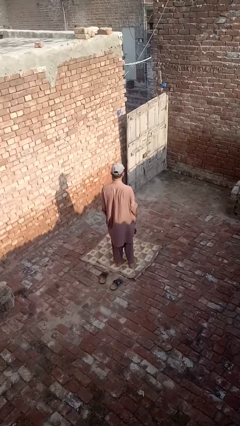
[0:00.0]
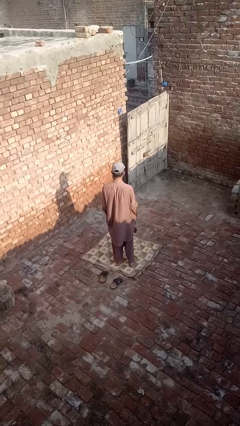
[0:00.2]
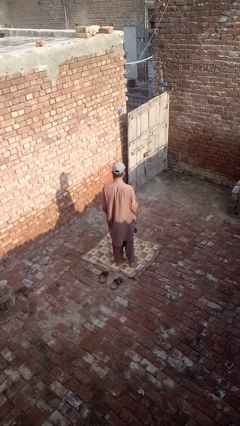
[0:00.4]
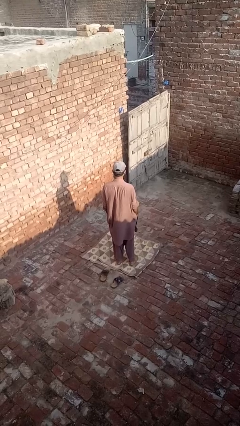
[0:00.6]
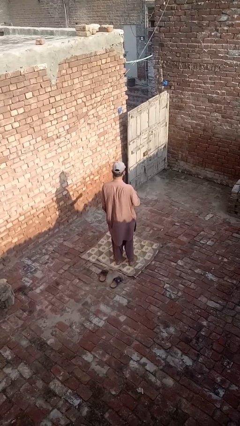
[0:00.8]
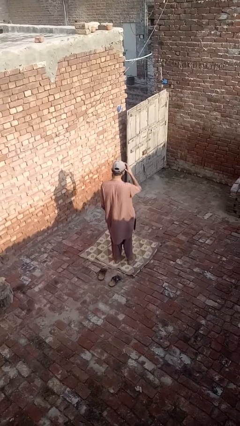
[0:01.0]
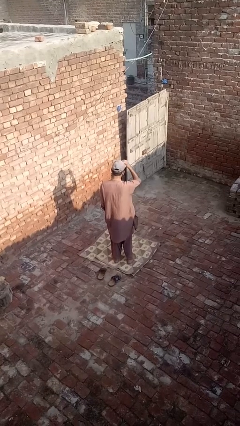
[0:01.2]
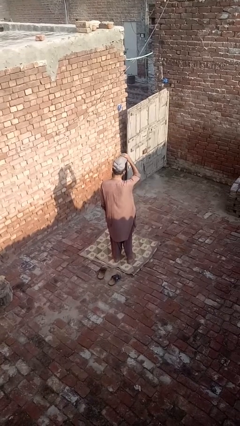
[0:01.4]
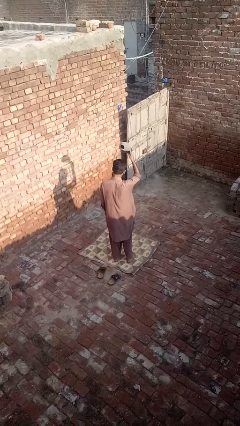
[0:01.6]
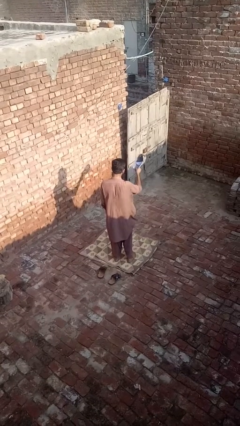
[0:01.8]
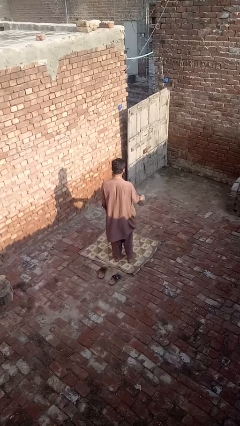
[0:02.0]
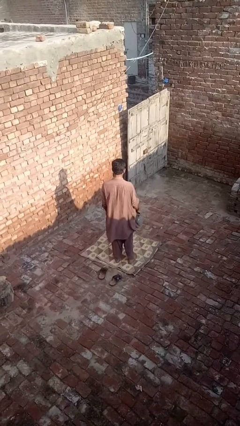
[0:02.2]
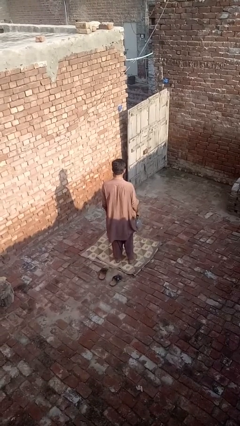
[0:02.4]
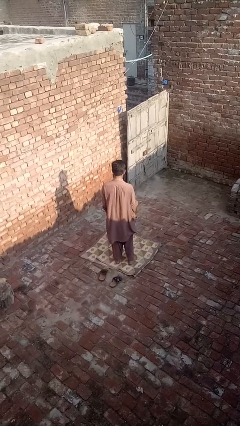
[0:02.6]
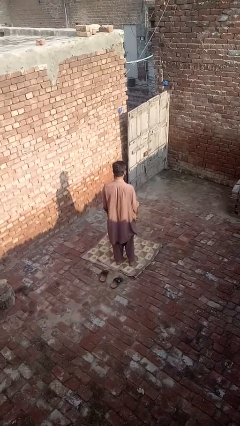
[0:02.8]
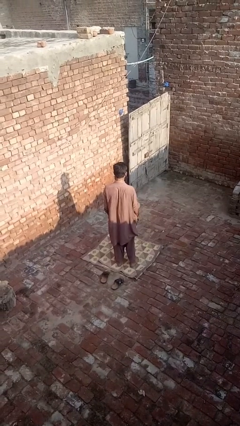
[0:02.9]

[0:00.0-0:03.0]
person takes off hat

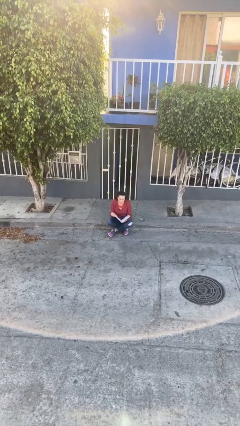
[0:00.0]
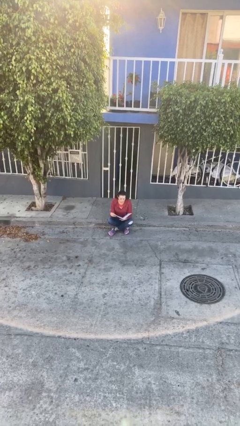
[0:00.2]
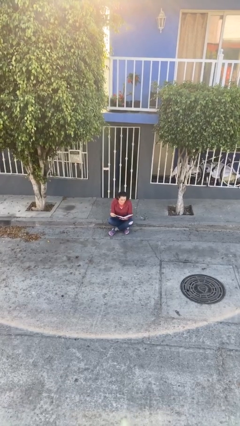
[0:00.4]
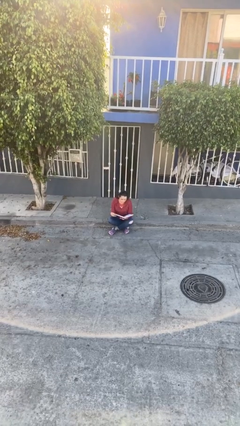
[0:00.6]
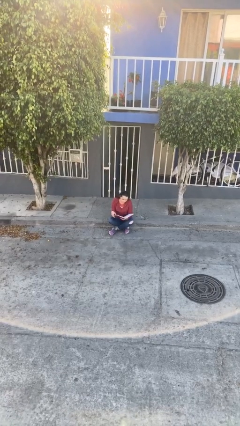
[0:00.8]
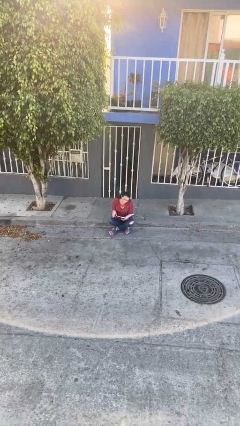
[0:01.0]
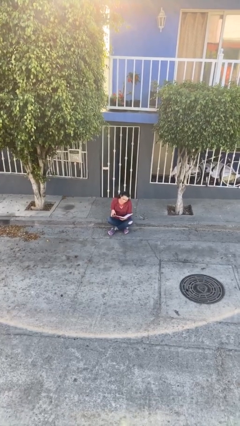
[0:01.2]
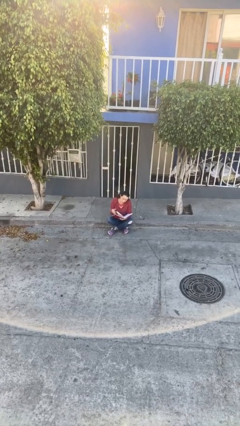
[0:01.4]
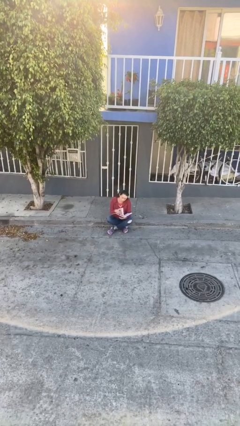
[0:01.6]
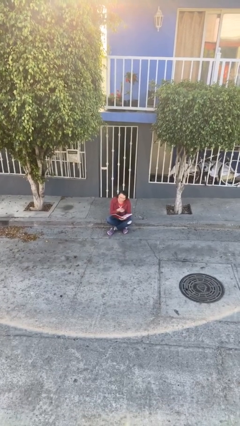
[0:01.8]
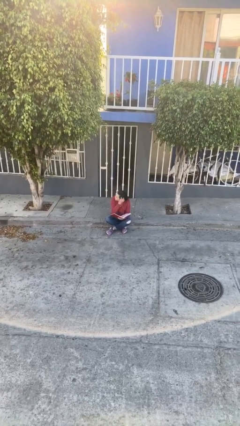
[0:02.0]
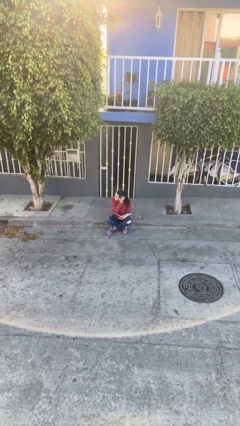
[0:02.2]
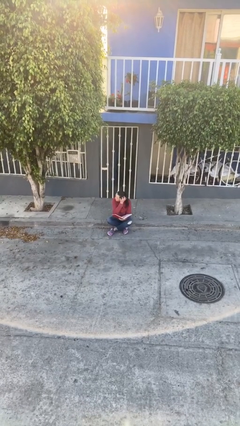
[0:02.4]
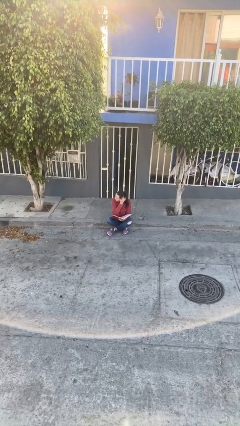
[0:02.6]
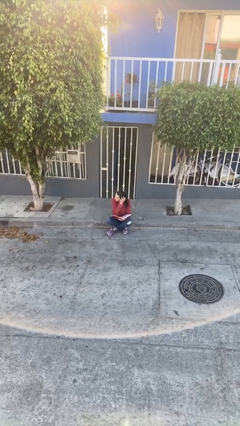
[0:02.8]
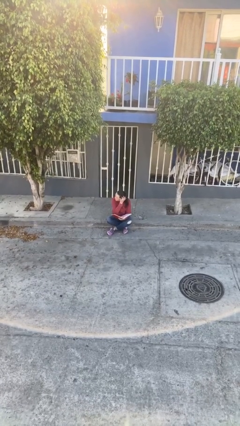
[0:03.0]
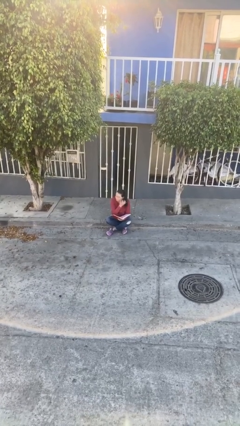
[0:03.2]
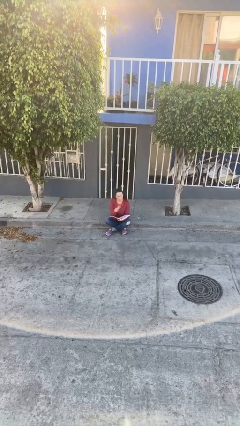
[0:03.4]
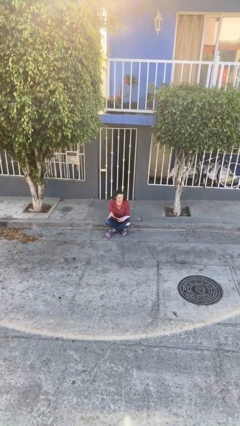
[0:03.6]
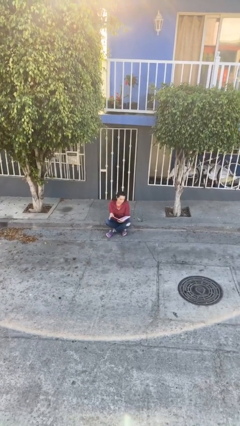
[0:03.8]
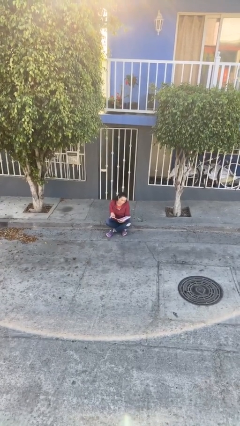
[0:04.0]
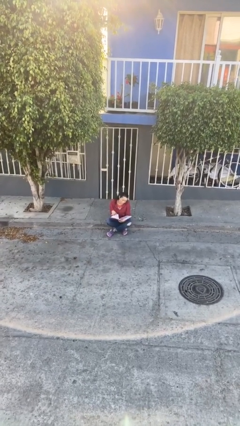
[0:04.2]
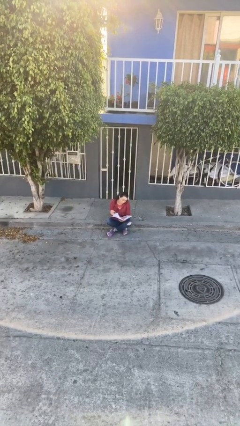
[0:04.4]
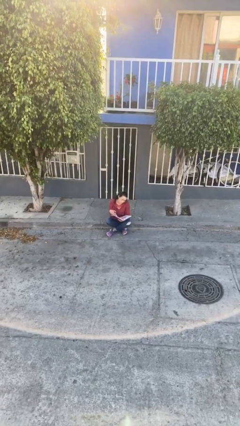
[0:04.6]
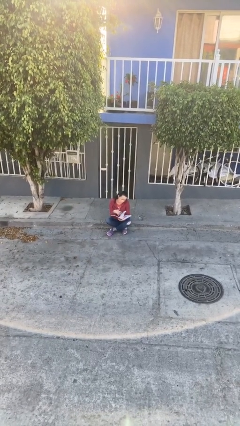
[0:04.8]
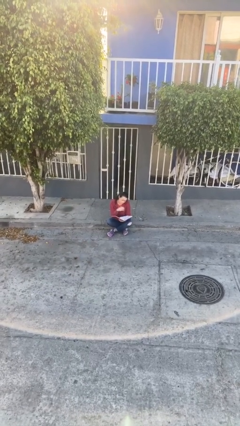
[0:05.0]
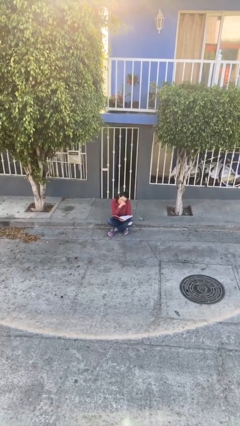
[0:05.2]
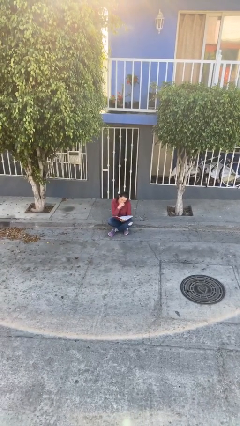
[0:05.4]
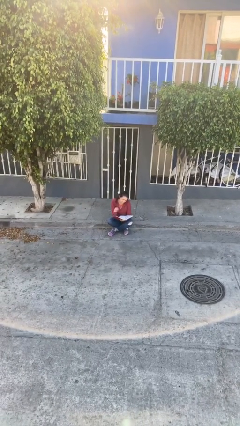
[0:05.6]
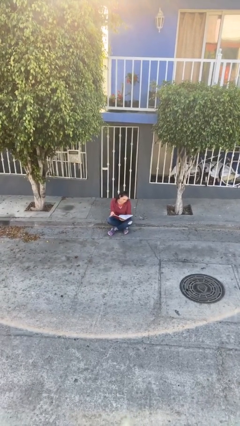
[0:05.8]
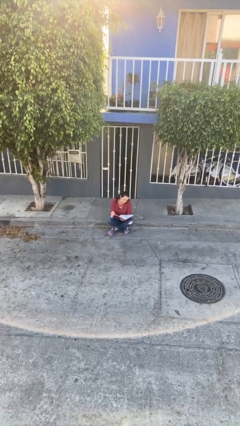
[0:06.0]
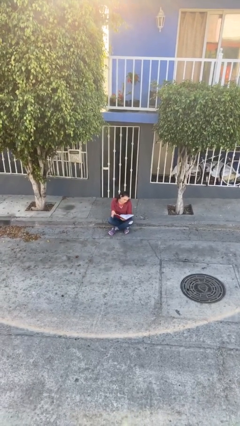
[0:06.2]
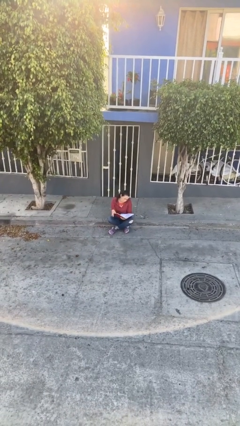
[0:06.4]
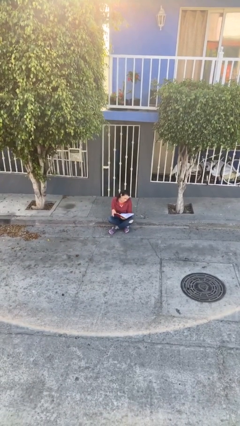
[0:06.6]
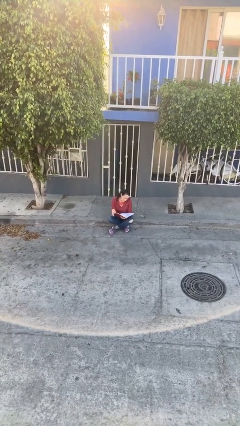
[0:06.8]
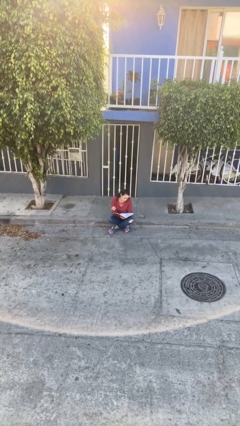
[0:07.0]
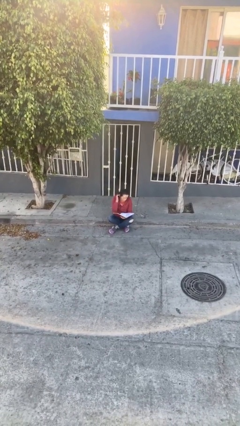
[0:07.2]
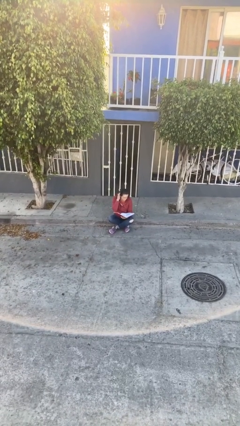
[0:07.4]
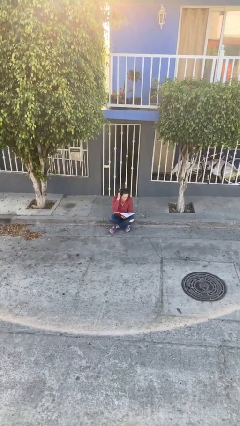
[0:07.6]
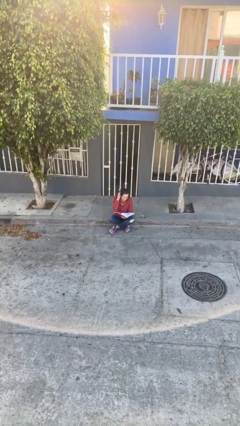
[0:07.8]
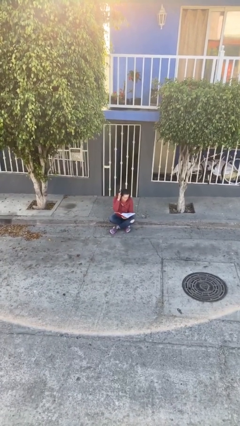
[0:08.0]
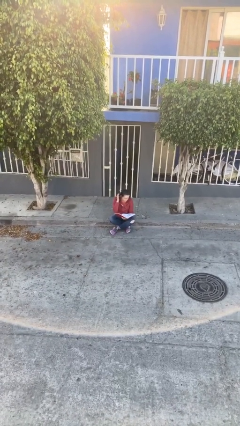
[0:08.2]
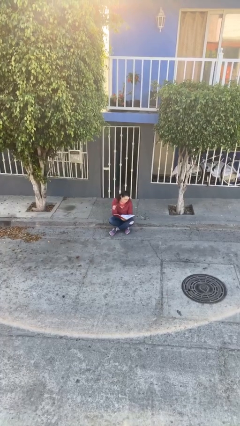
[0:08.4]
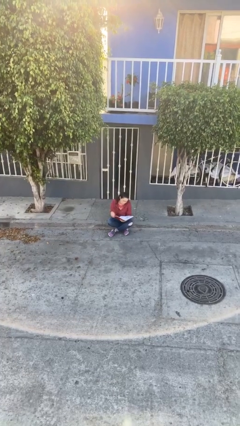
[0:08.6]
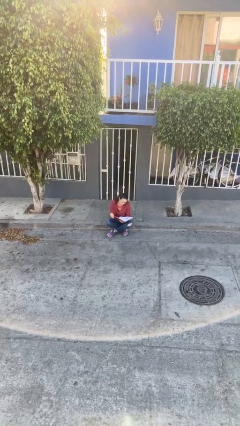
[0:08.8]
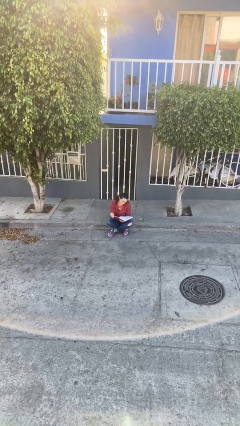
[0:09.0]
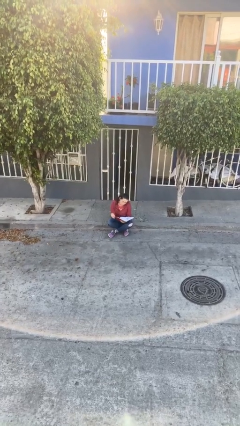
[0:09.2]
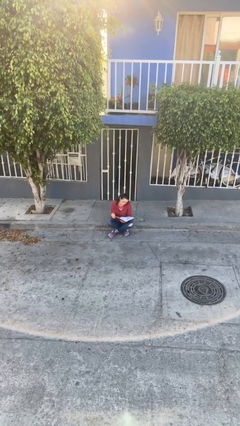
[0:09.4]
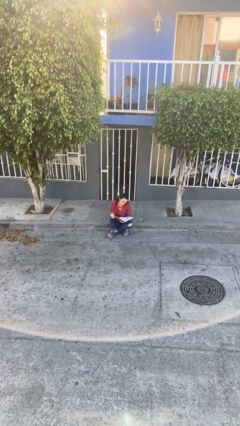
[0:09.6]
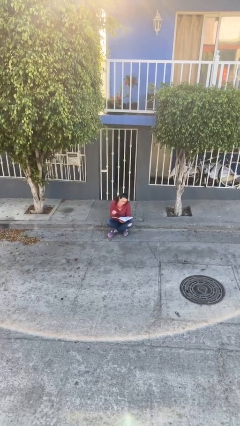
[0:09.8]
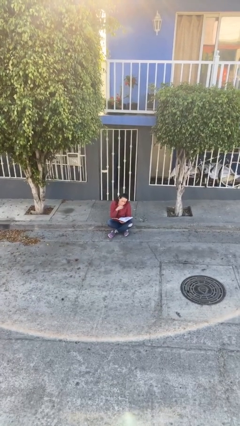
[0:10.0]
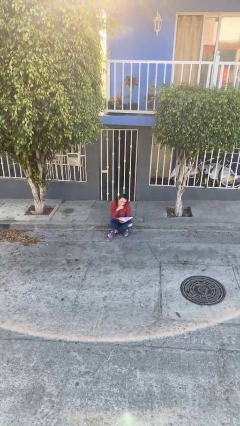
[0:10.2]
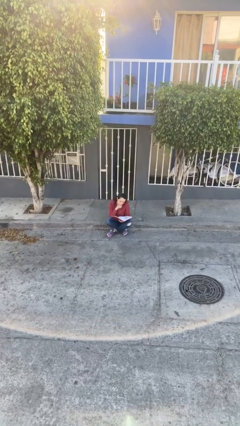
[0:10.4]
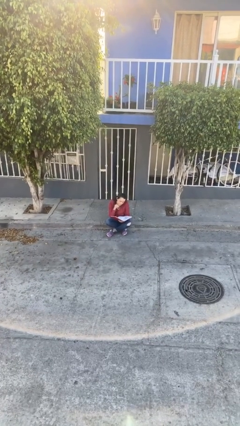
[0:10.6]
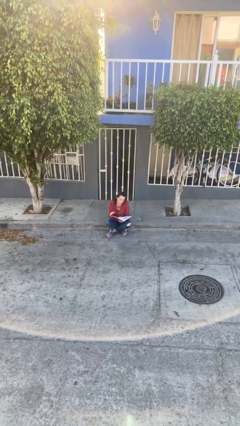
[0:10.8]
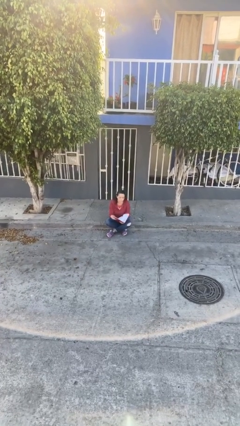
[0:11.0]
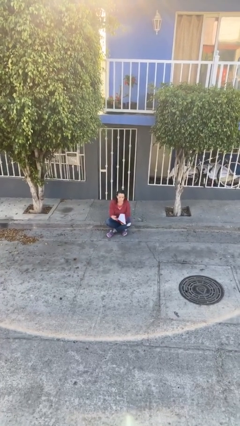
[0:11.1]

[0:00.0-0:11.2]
person reads document

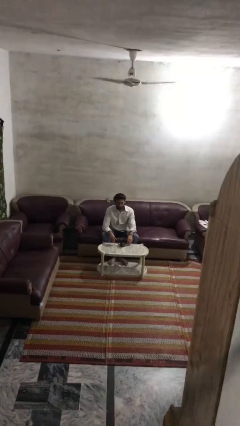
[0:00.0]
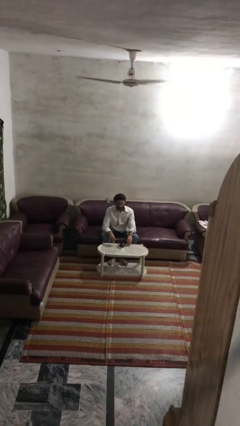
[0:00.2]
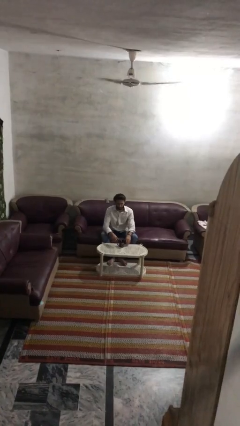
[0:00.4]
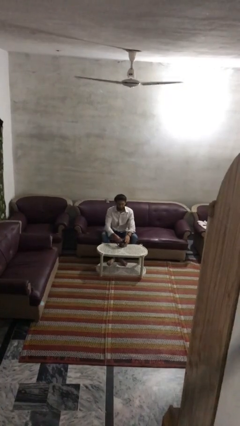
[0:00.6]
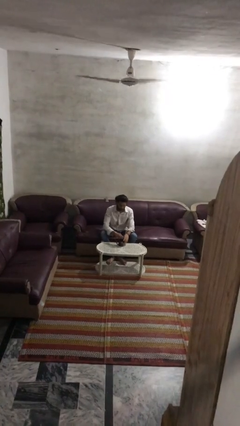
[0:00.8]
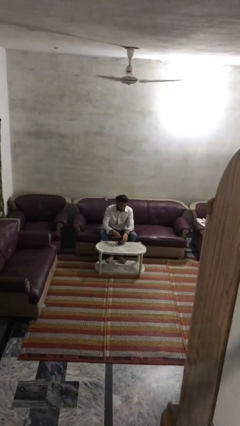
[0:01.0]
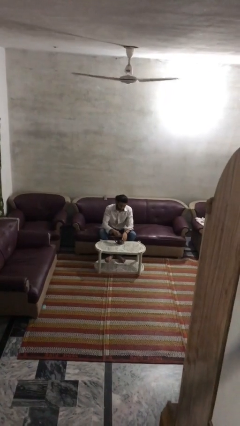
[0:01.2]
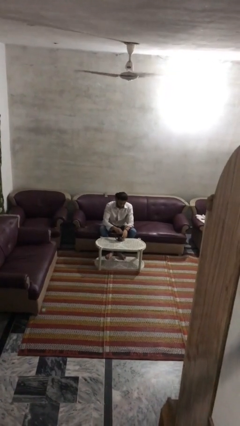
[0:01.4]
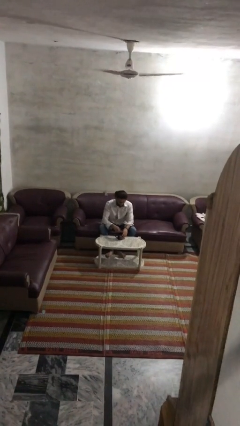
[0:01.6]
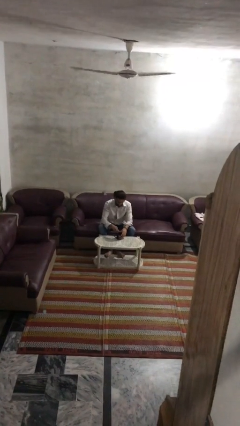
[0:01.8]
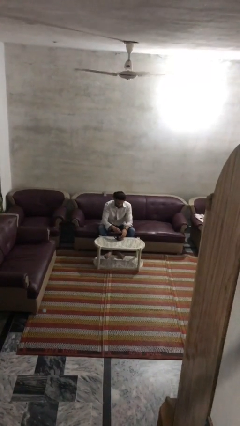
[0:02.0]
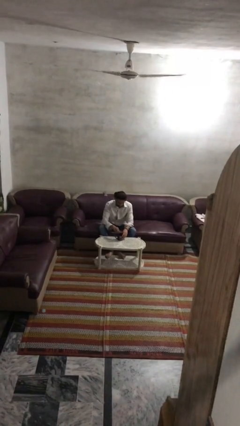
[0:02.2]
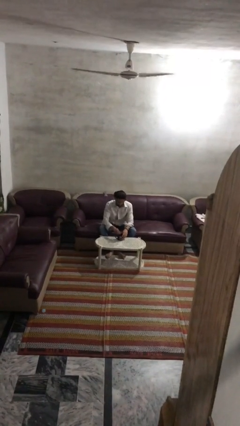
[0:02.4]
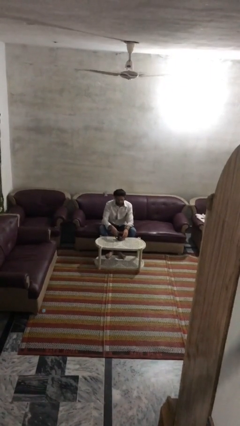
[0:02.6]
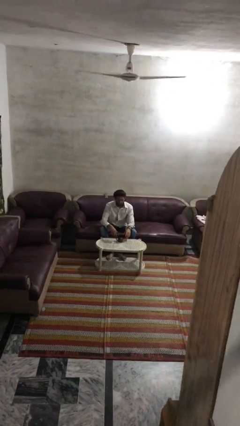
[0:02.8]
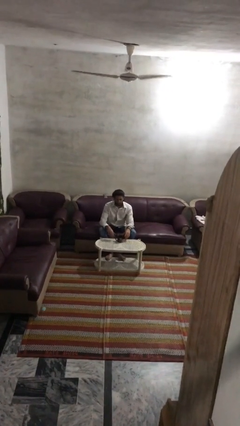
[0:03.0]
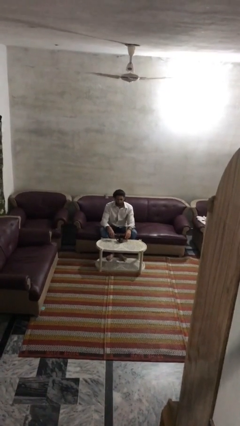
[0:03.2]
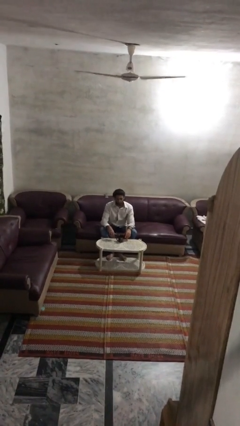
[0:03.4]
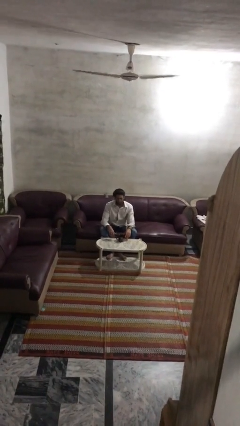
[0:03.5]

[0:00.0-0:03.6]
person stirs mug

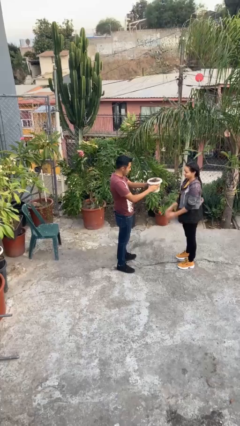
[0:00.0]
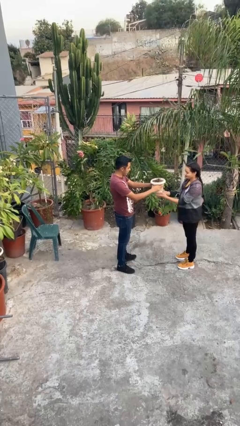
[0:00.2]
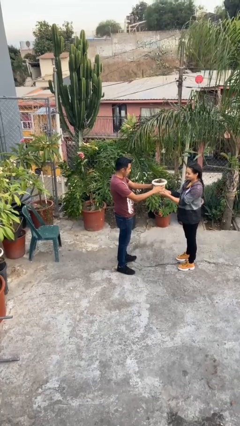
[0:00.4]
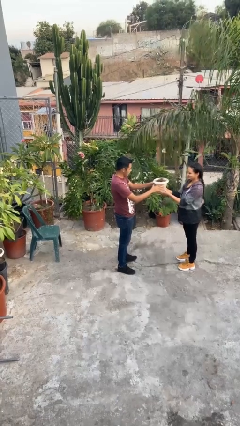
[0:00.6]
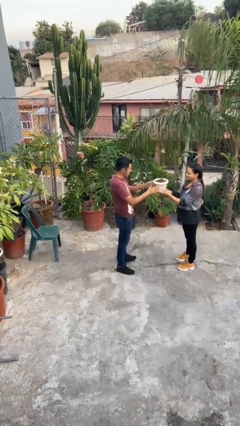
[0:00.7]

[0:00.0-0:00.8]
person transfers object to person
